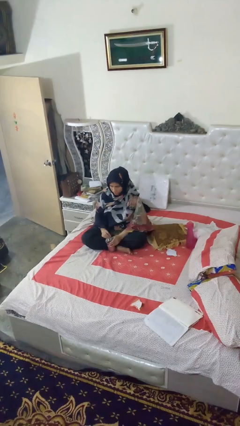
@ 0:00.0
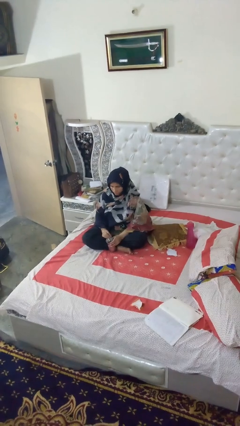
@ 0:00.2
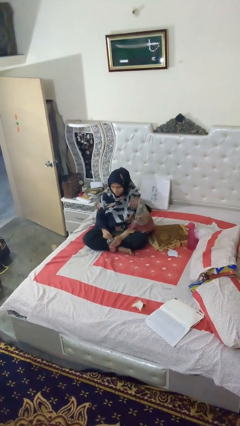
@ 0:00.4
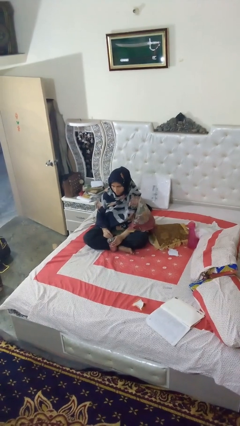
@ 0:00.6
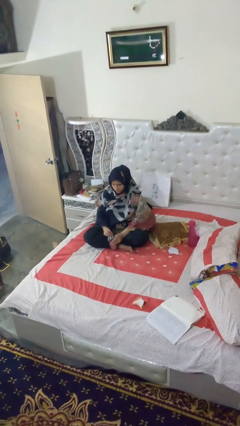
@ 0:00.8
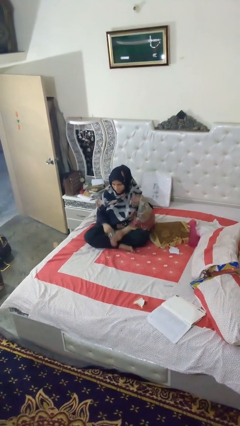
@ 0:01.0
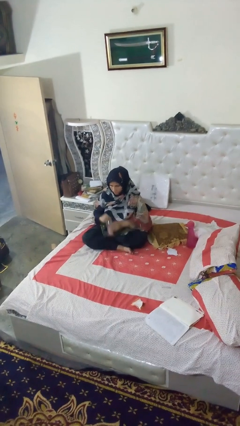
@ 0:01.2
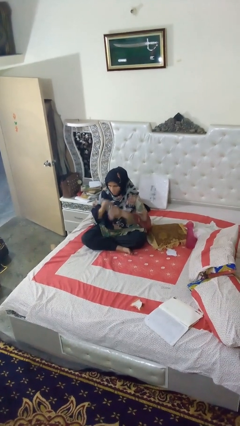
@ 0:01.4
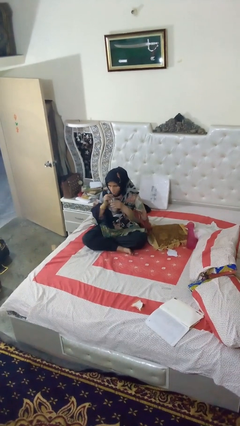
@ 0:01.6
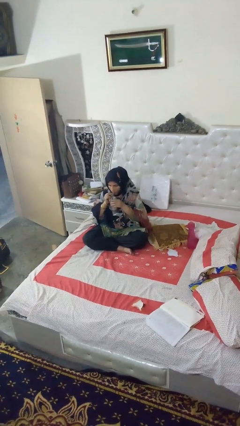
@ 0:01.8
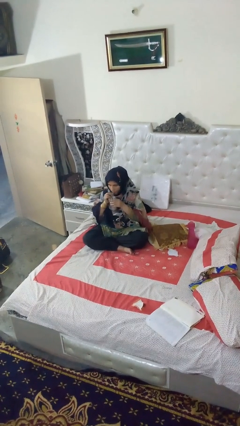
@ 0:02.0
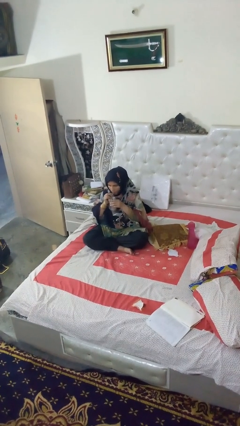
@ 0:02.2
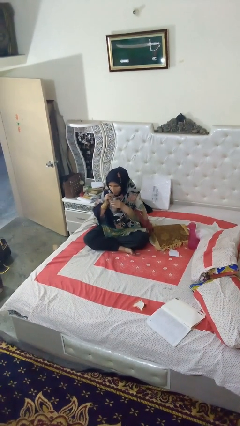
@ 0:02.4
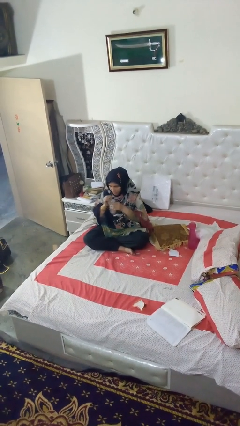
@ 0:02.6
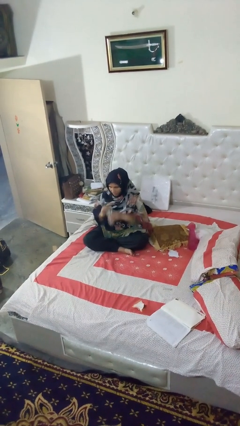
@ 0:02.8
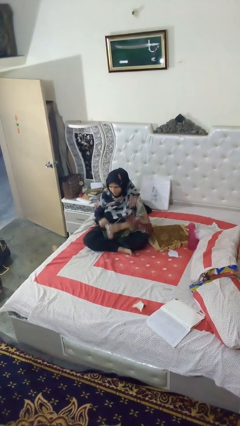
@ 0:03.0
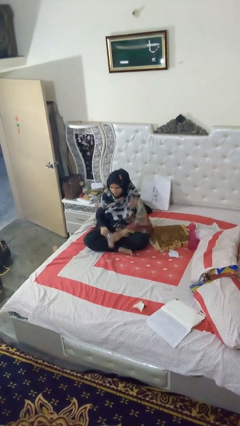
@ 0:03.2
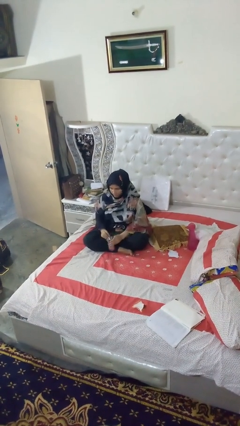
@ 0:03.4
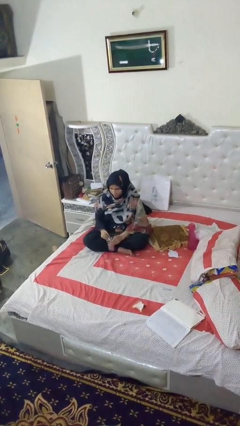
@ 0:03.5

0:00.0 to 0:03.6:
person drinks from straw

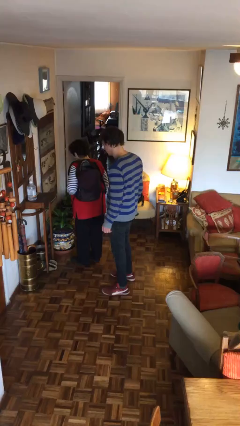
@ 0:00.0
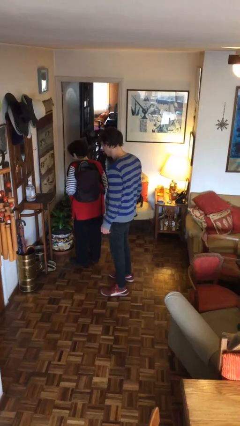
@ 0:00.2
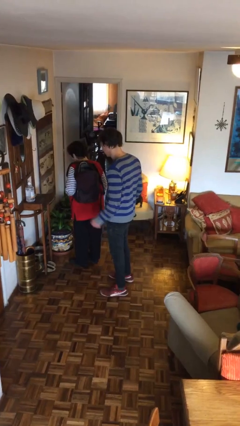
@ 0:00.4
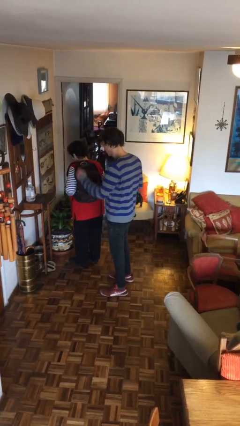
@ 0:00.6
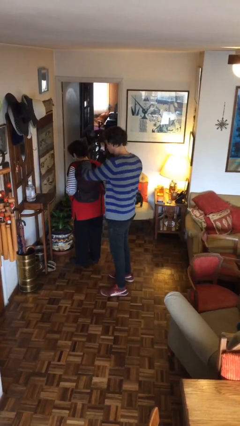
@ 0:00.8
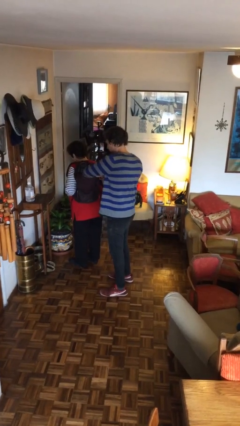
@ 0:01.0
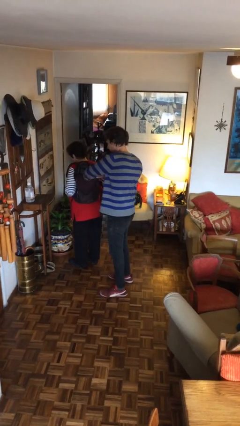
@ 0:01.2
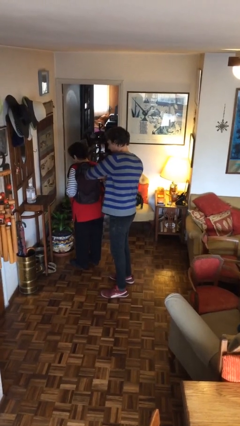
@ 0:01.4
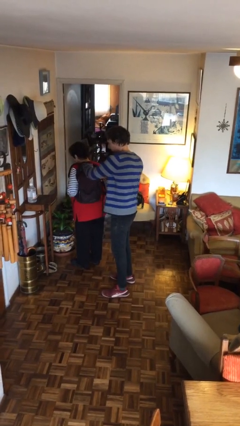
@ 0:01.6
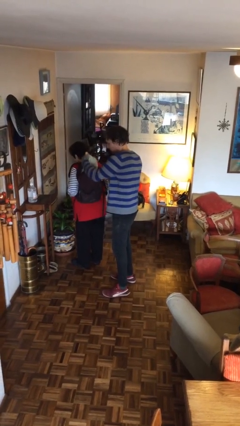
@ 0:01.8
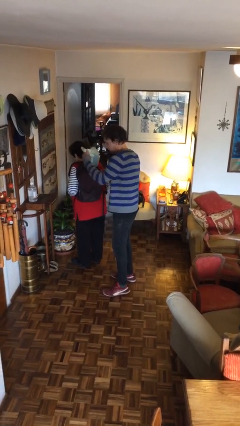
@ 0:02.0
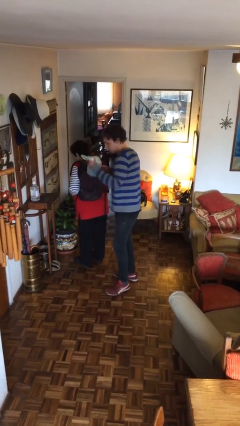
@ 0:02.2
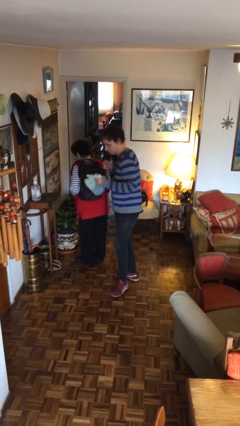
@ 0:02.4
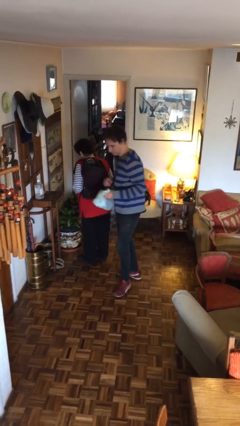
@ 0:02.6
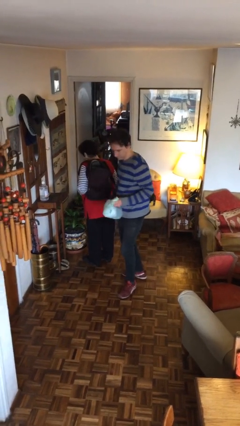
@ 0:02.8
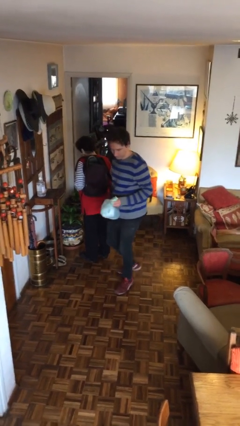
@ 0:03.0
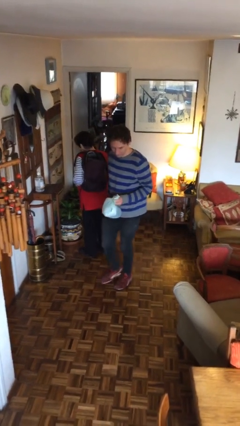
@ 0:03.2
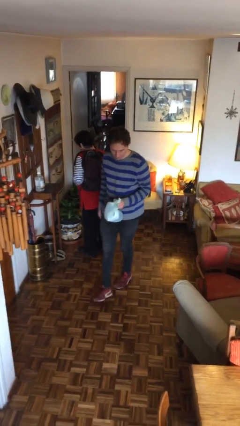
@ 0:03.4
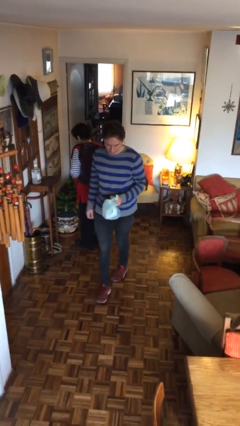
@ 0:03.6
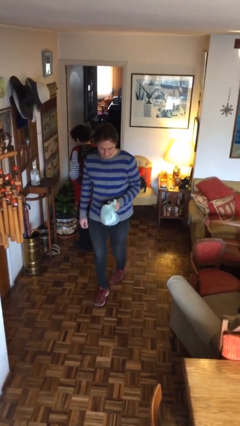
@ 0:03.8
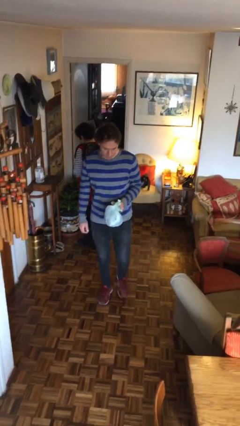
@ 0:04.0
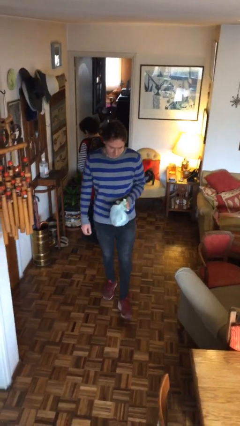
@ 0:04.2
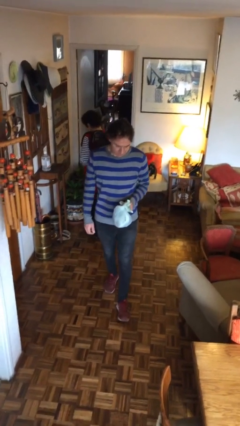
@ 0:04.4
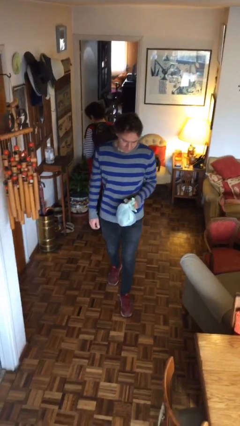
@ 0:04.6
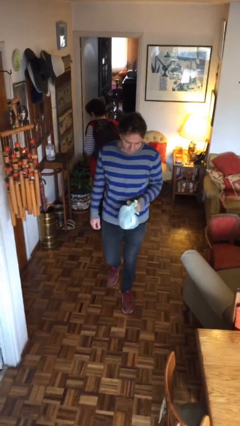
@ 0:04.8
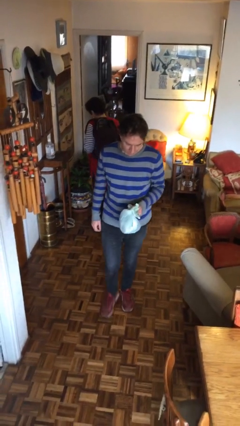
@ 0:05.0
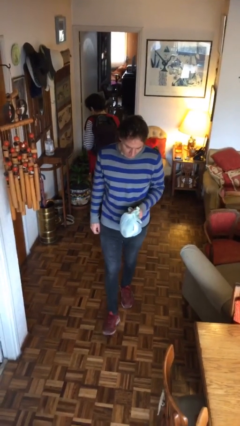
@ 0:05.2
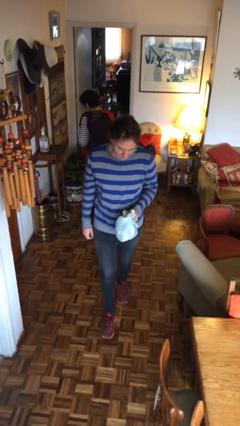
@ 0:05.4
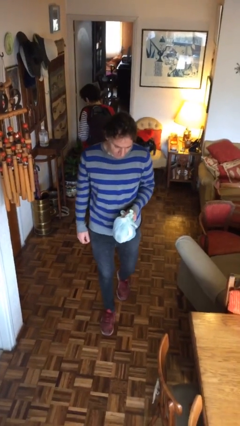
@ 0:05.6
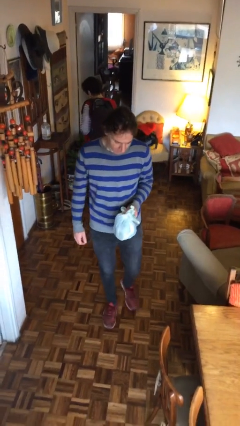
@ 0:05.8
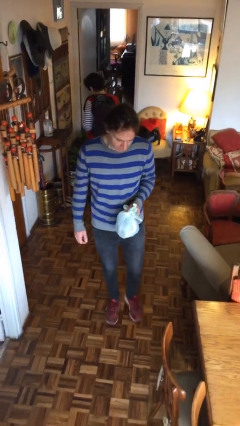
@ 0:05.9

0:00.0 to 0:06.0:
person steals object from person

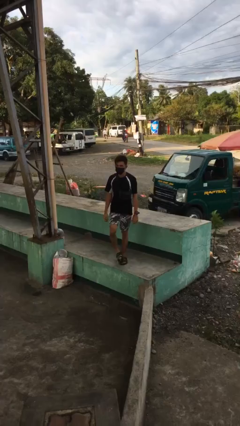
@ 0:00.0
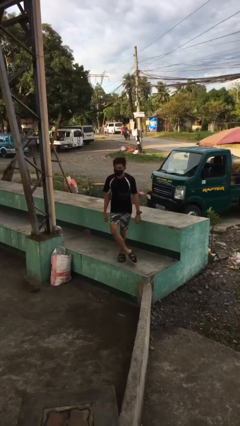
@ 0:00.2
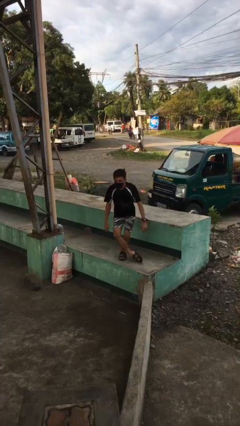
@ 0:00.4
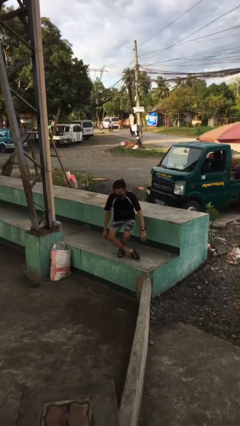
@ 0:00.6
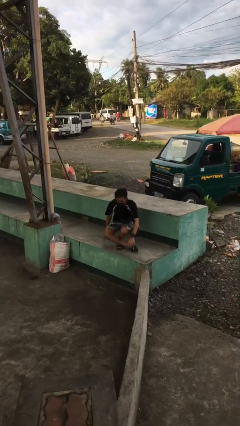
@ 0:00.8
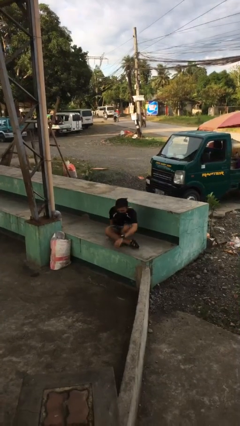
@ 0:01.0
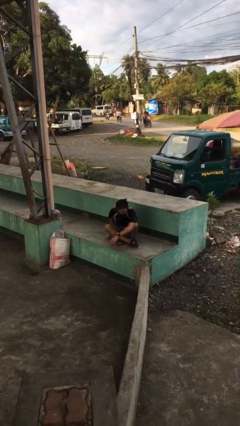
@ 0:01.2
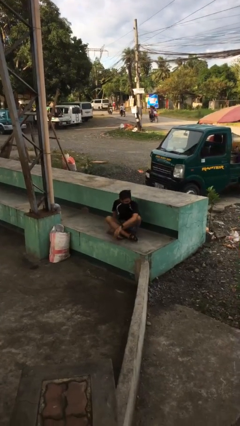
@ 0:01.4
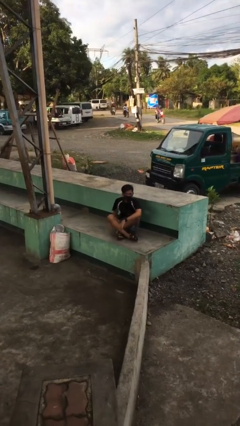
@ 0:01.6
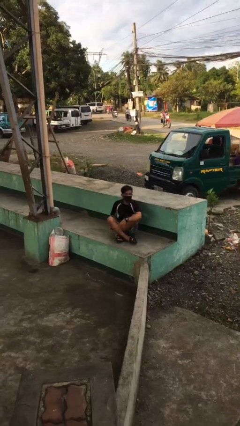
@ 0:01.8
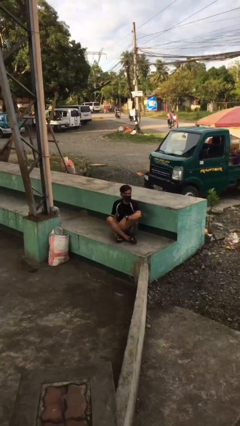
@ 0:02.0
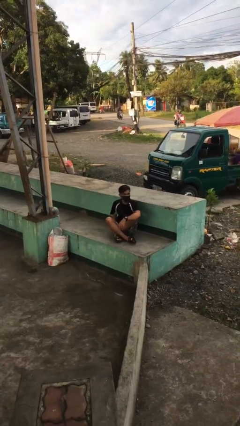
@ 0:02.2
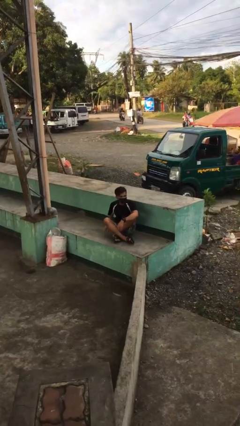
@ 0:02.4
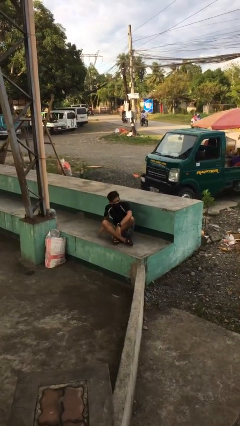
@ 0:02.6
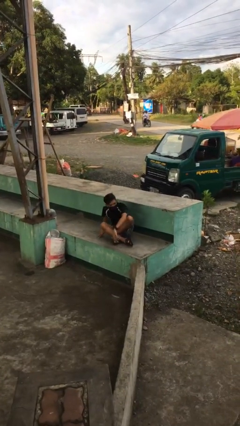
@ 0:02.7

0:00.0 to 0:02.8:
person sits crisscross

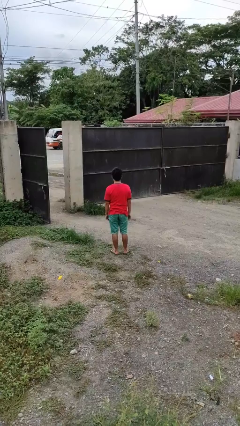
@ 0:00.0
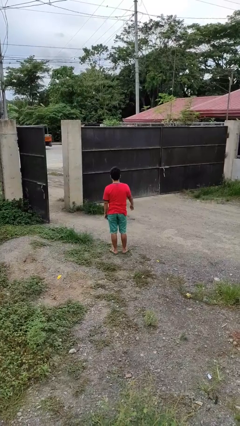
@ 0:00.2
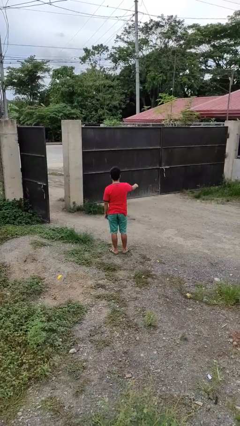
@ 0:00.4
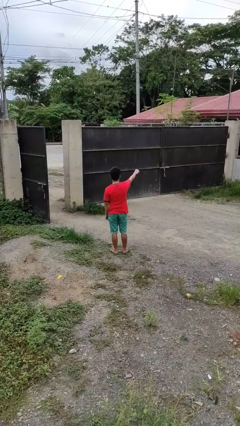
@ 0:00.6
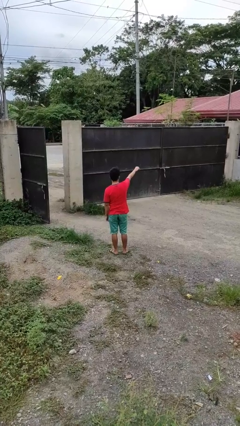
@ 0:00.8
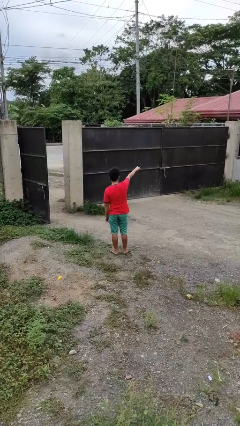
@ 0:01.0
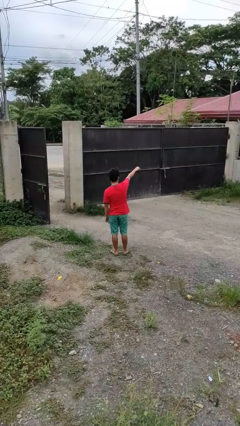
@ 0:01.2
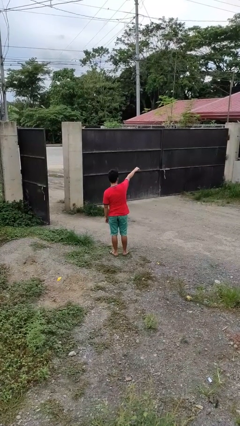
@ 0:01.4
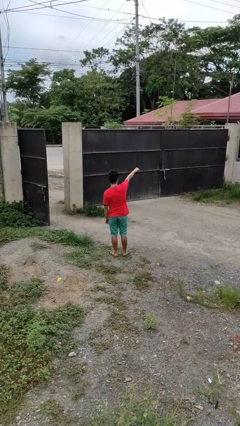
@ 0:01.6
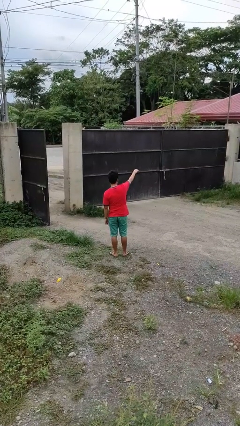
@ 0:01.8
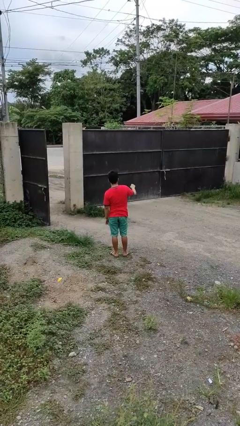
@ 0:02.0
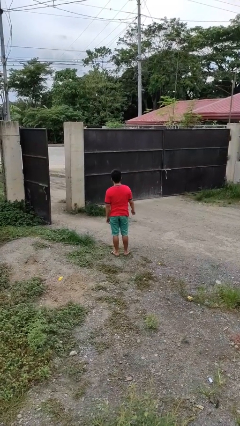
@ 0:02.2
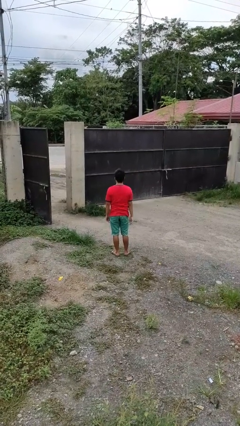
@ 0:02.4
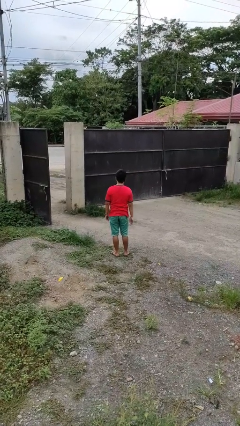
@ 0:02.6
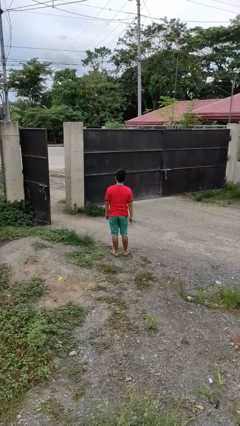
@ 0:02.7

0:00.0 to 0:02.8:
person points at person

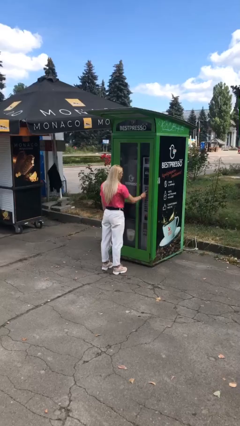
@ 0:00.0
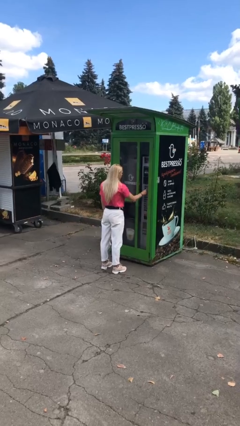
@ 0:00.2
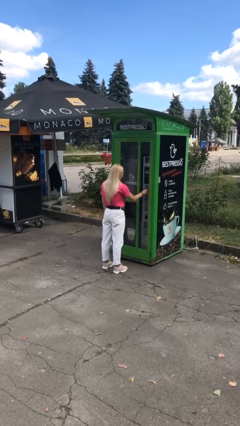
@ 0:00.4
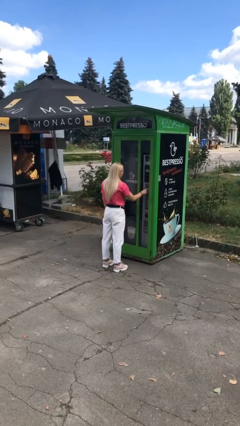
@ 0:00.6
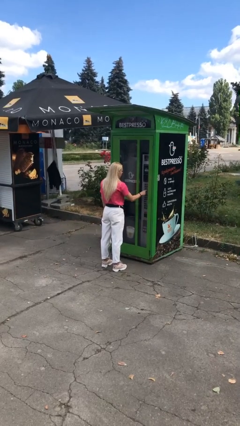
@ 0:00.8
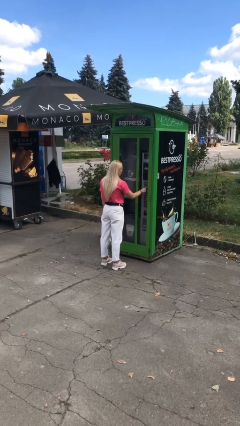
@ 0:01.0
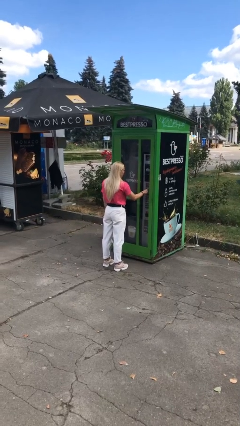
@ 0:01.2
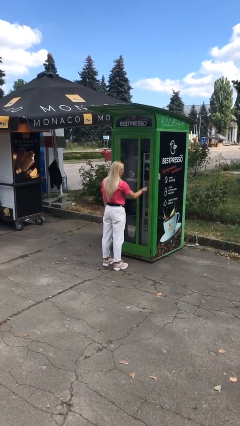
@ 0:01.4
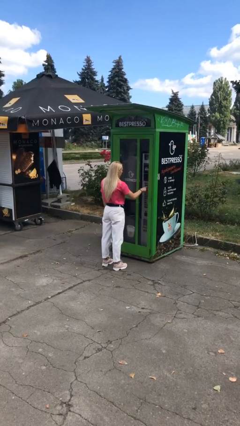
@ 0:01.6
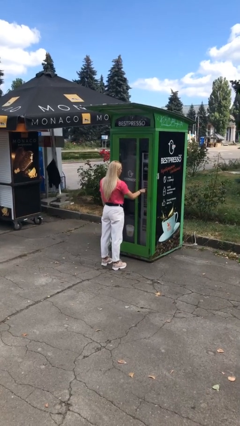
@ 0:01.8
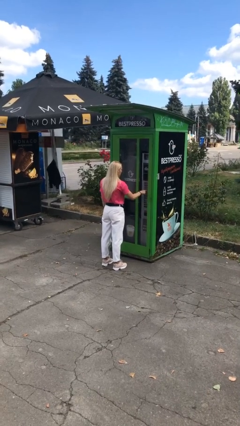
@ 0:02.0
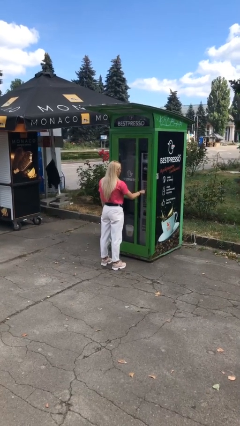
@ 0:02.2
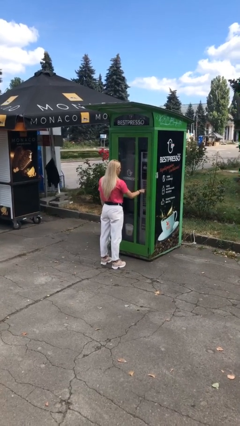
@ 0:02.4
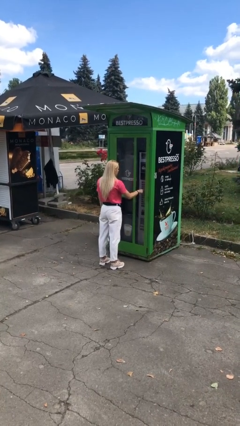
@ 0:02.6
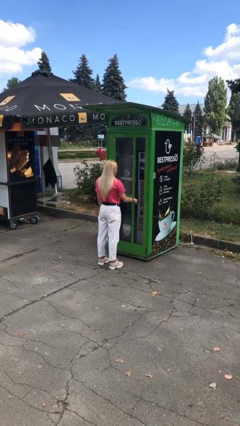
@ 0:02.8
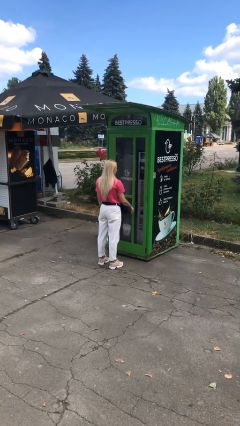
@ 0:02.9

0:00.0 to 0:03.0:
person purchases from machine
